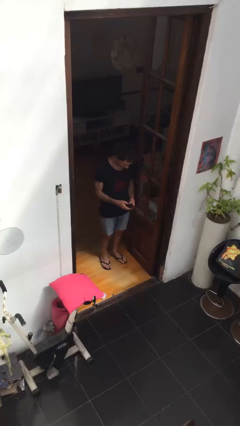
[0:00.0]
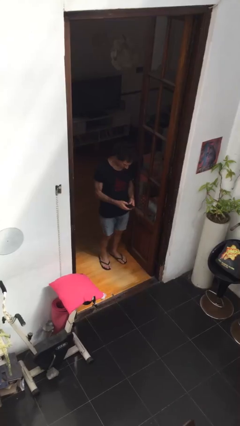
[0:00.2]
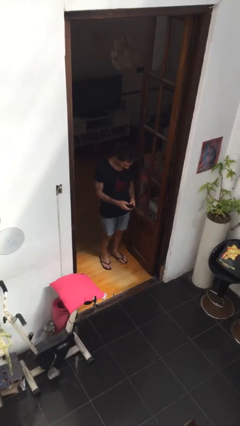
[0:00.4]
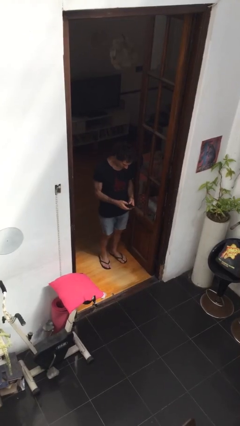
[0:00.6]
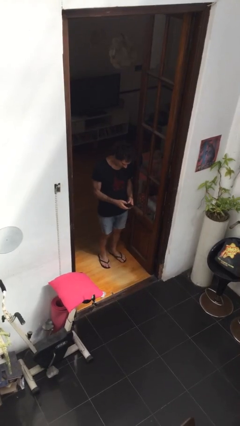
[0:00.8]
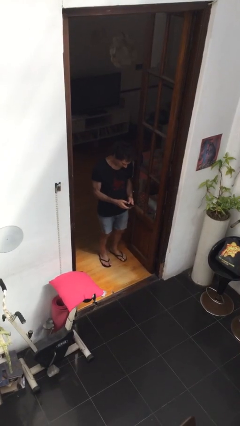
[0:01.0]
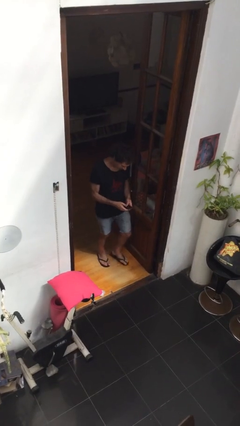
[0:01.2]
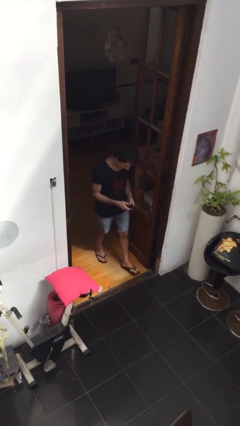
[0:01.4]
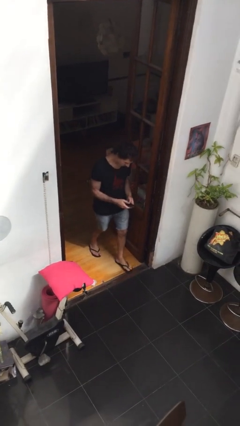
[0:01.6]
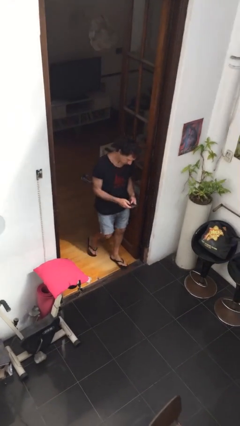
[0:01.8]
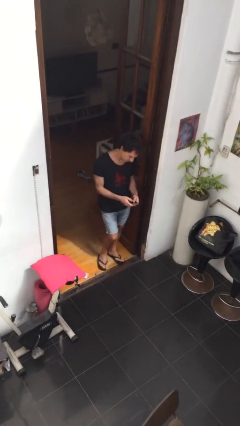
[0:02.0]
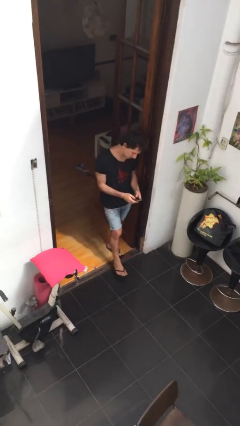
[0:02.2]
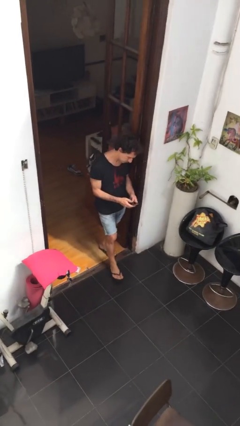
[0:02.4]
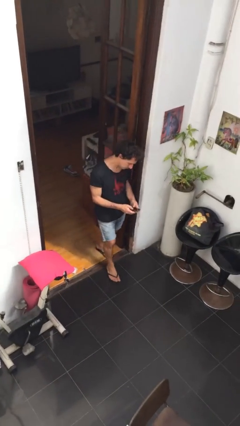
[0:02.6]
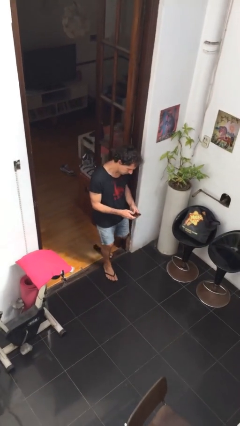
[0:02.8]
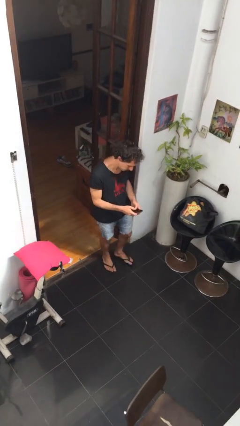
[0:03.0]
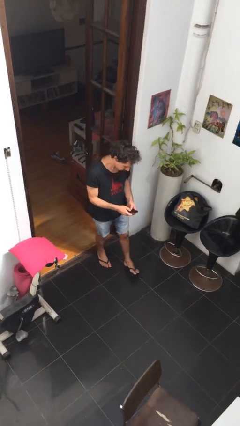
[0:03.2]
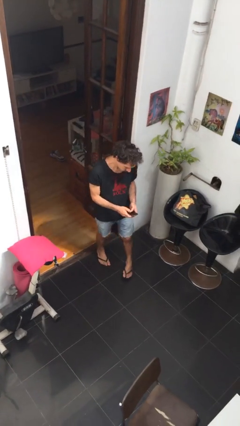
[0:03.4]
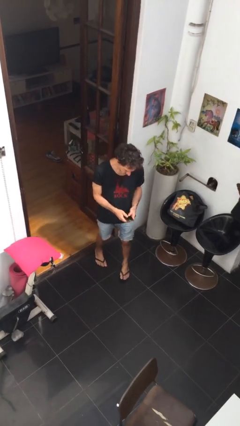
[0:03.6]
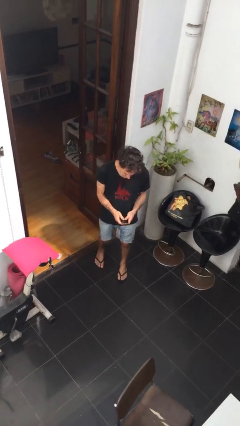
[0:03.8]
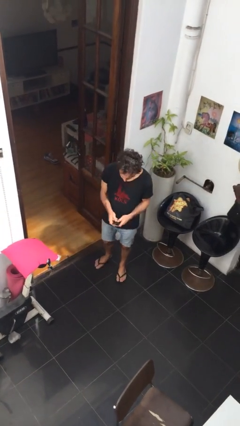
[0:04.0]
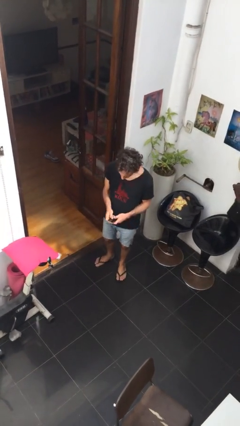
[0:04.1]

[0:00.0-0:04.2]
person enters scene through structure

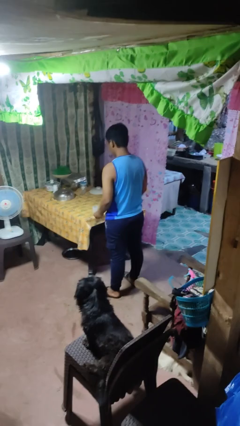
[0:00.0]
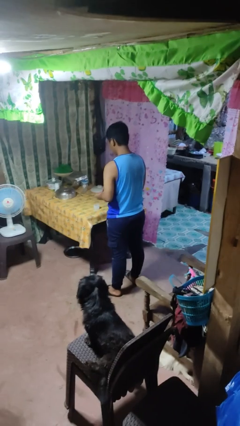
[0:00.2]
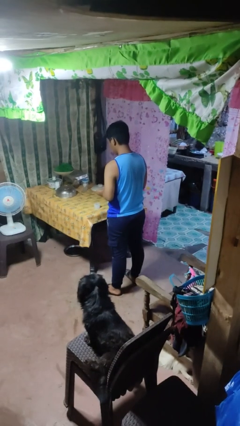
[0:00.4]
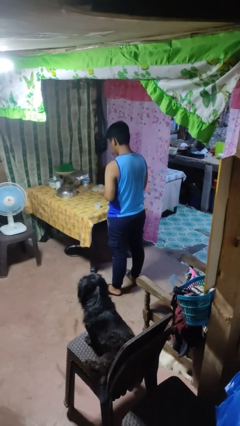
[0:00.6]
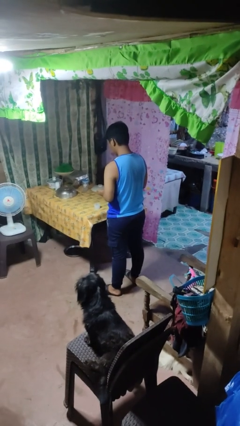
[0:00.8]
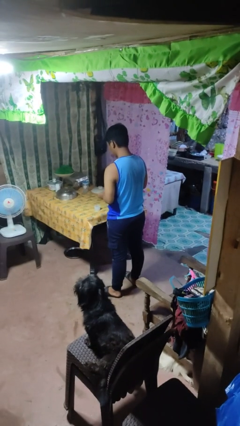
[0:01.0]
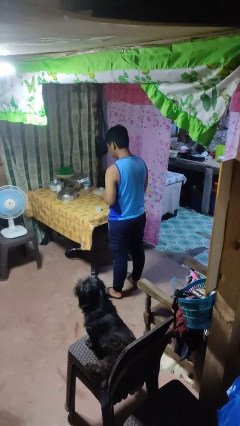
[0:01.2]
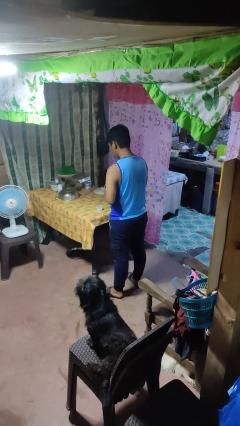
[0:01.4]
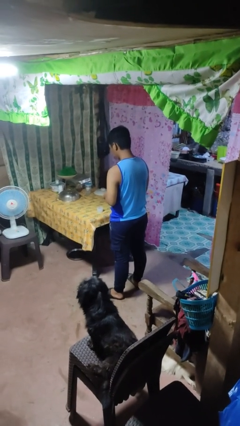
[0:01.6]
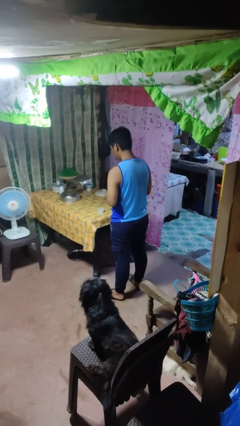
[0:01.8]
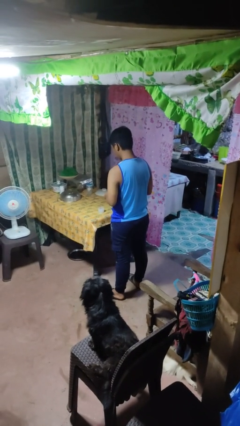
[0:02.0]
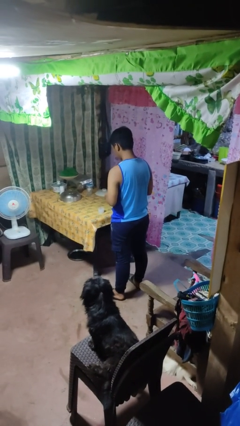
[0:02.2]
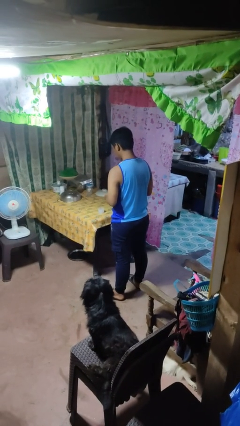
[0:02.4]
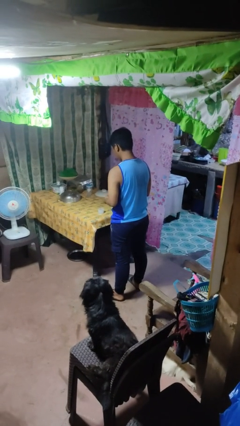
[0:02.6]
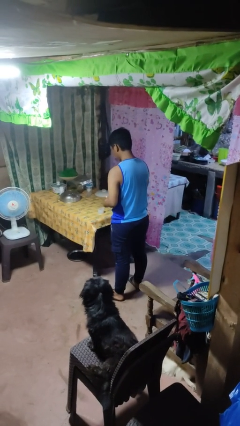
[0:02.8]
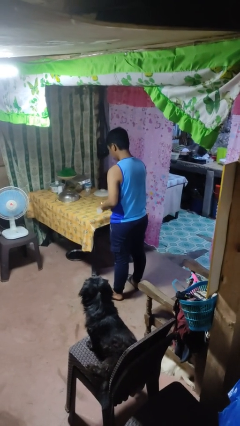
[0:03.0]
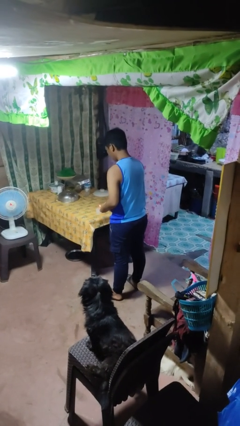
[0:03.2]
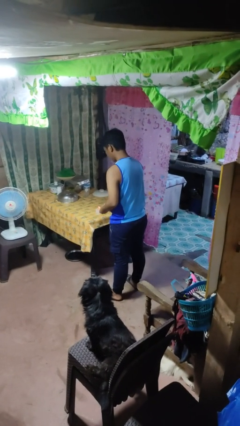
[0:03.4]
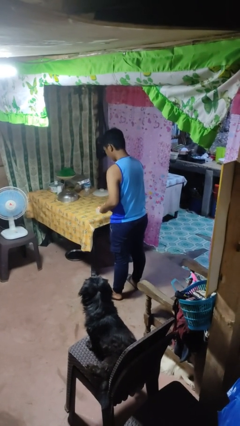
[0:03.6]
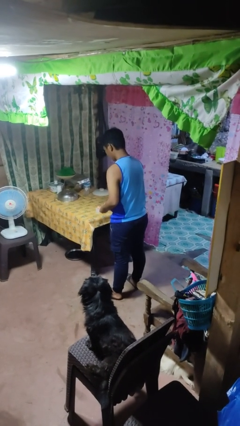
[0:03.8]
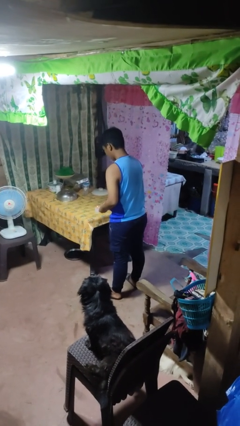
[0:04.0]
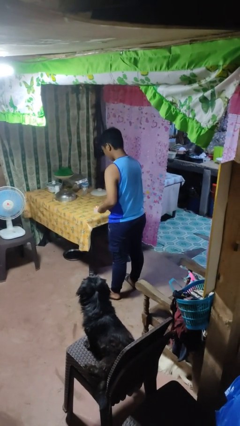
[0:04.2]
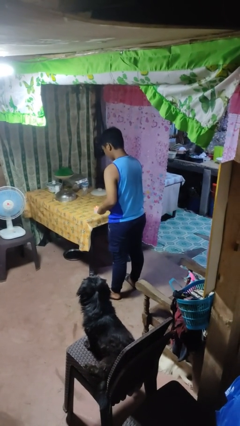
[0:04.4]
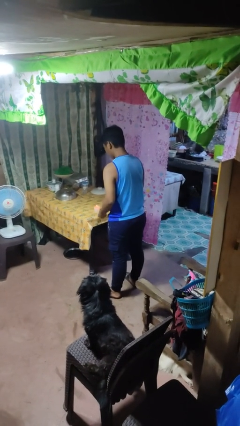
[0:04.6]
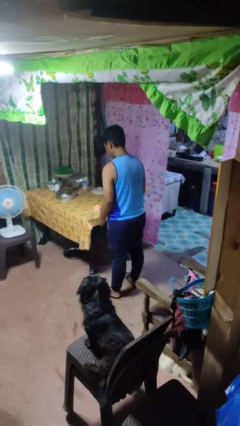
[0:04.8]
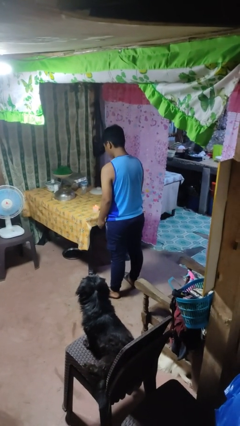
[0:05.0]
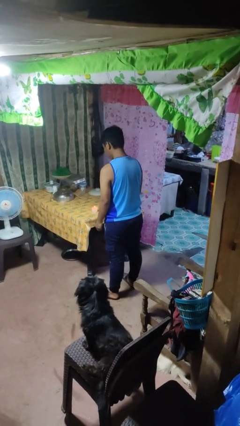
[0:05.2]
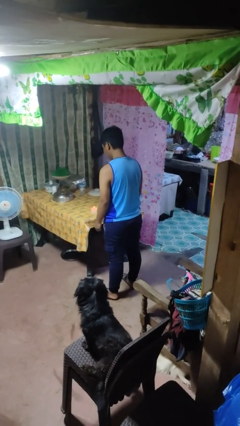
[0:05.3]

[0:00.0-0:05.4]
person lights candle

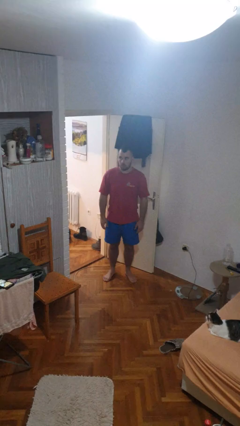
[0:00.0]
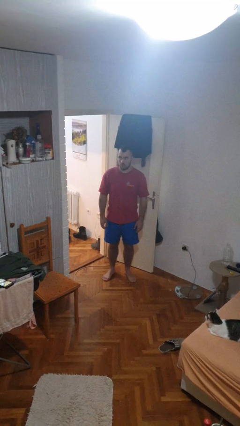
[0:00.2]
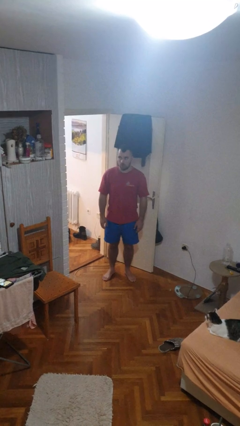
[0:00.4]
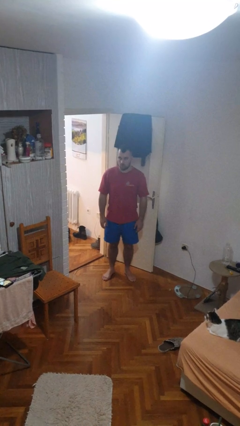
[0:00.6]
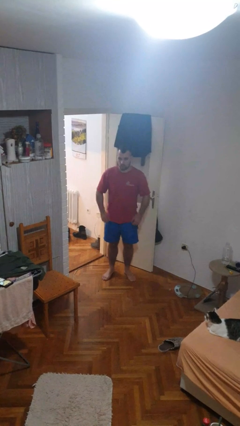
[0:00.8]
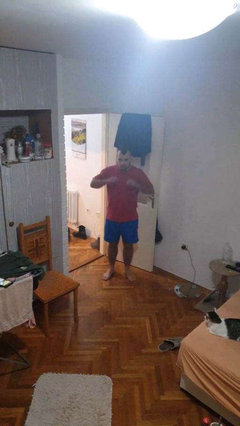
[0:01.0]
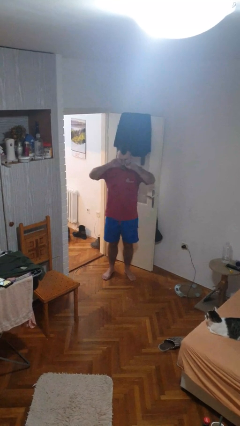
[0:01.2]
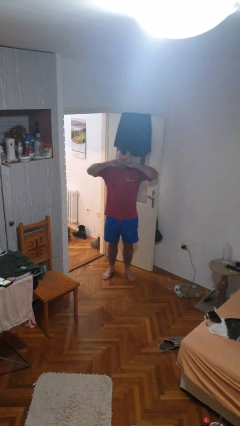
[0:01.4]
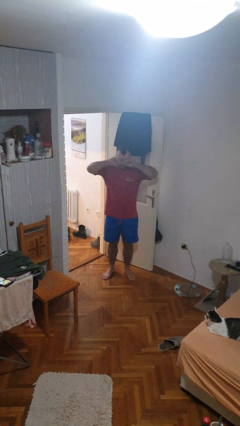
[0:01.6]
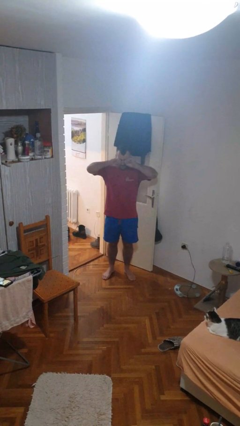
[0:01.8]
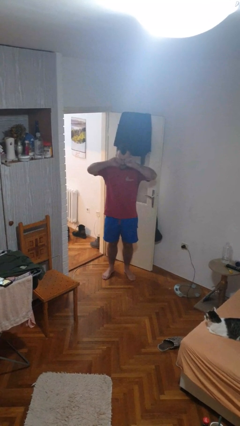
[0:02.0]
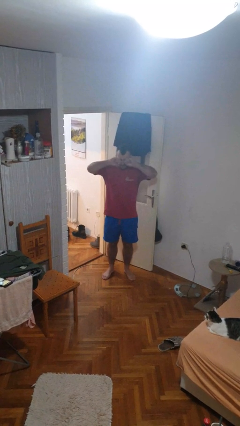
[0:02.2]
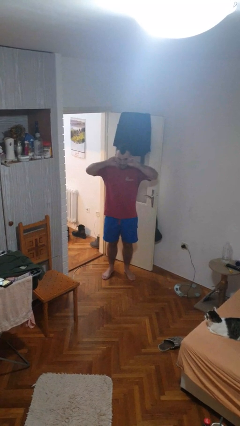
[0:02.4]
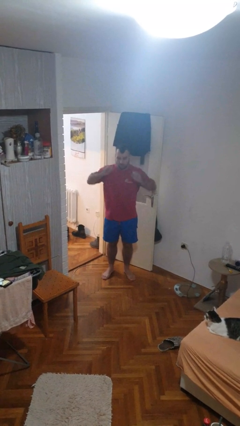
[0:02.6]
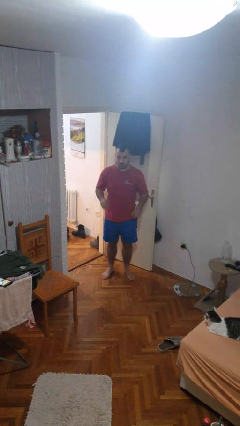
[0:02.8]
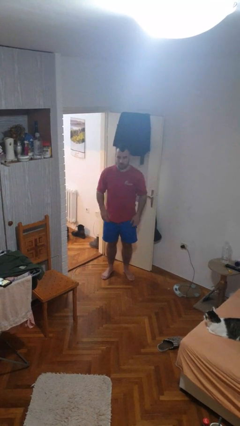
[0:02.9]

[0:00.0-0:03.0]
person rubs eyes

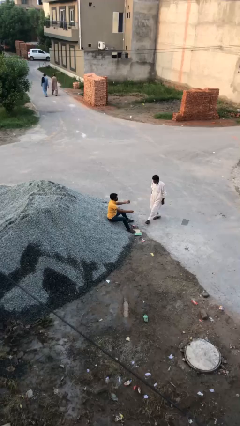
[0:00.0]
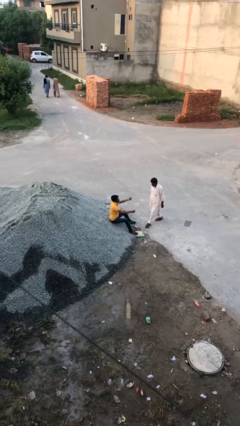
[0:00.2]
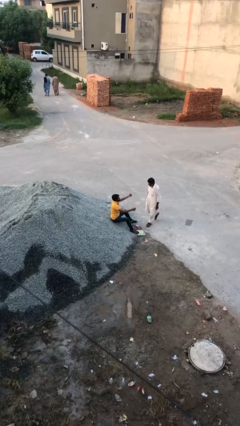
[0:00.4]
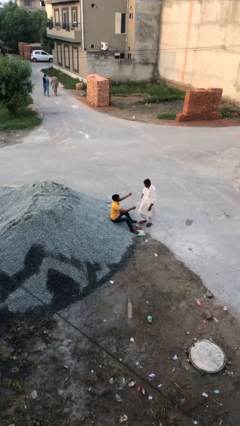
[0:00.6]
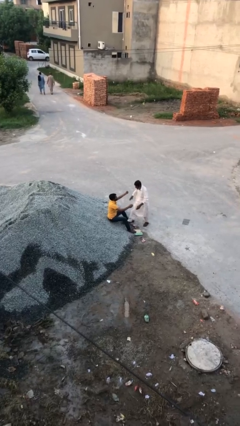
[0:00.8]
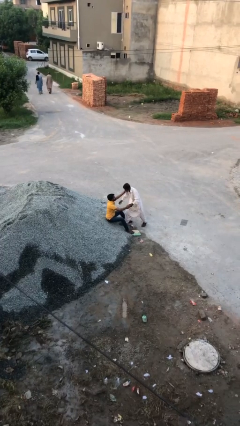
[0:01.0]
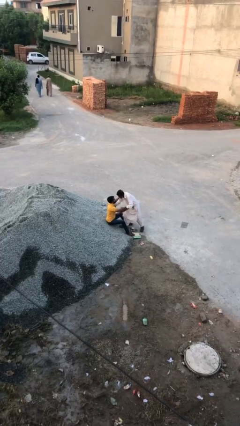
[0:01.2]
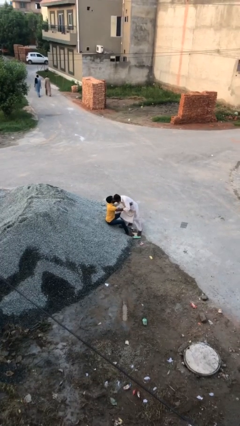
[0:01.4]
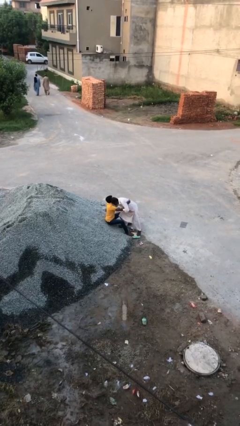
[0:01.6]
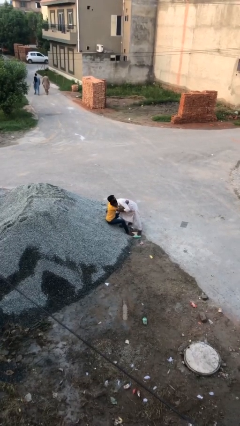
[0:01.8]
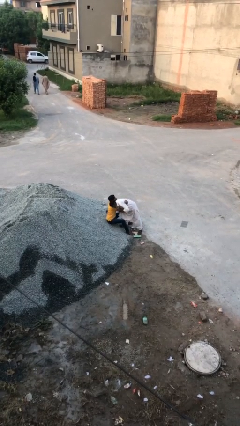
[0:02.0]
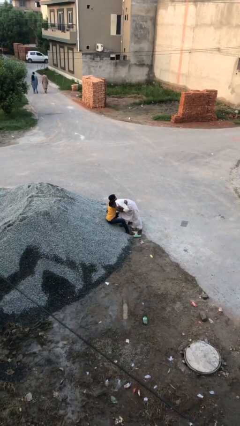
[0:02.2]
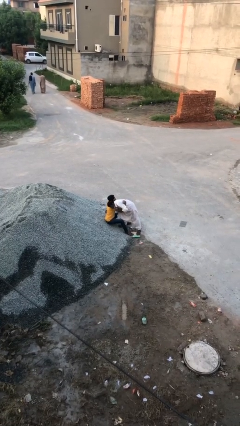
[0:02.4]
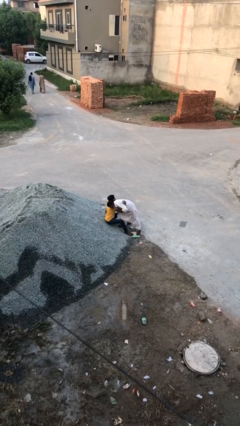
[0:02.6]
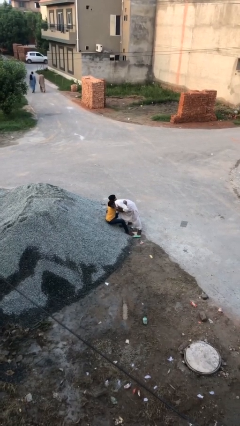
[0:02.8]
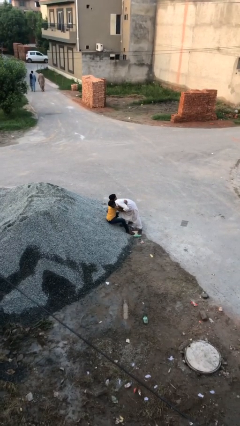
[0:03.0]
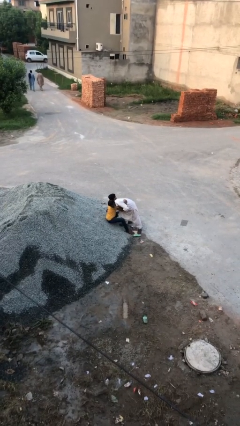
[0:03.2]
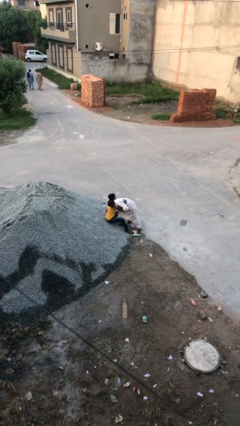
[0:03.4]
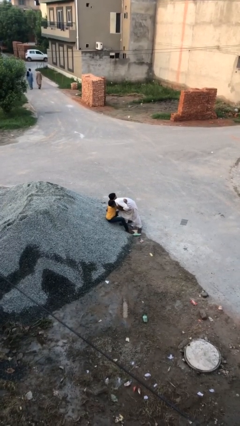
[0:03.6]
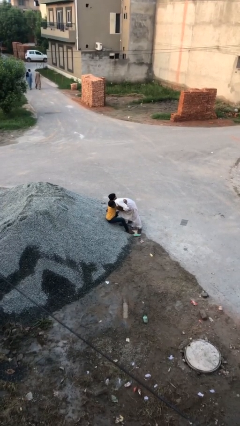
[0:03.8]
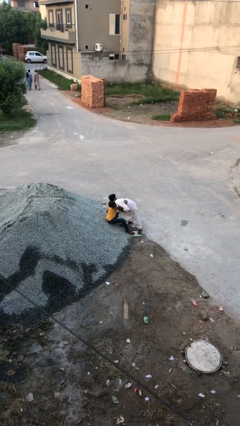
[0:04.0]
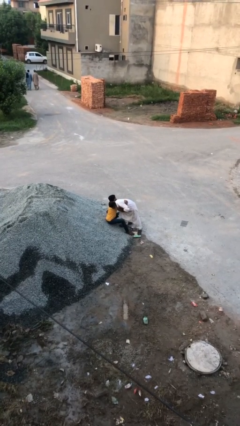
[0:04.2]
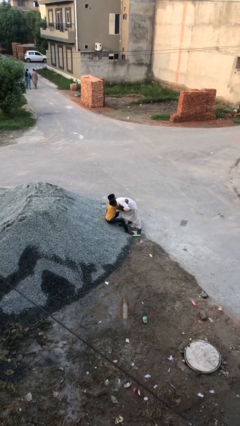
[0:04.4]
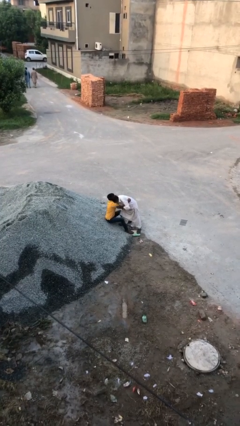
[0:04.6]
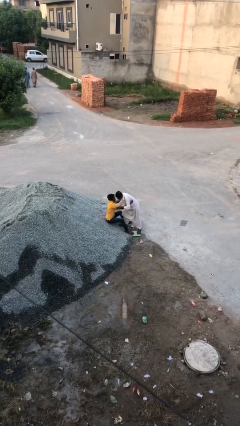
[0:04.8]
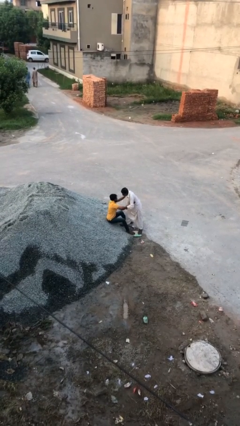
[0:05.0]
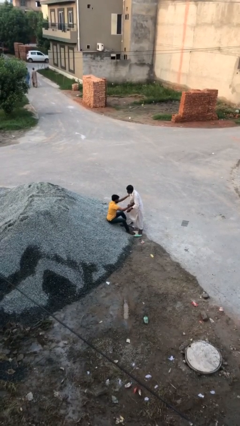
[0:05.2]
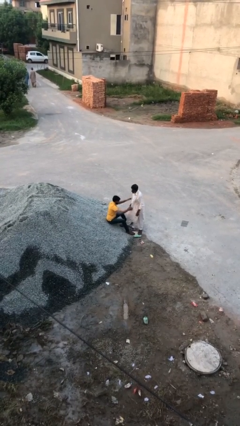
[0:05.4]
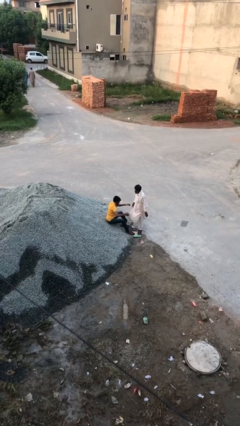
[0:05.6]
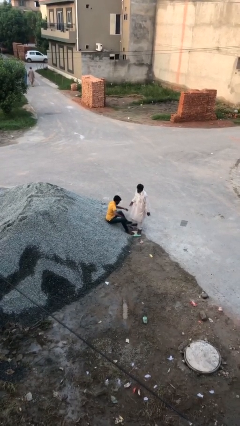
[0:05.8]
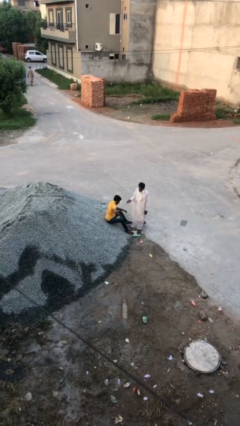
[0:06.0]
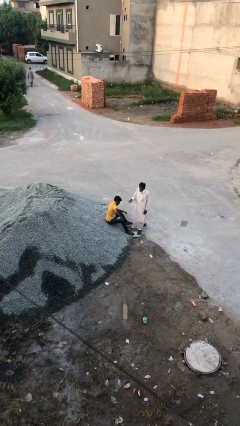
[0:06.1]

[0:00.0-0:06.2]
person embraces person
